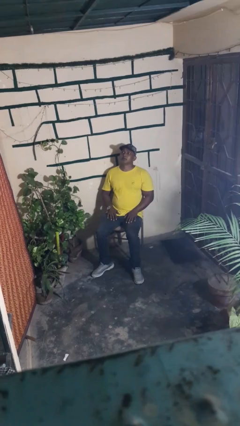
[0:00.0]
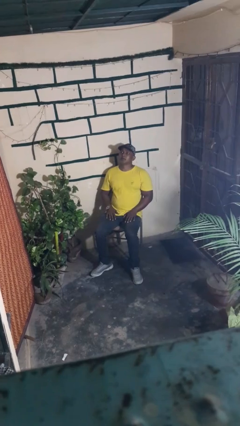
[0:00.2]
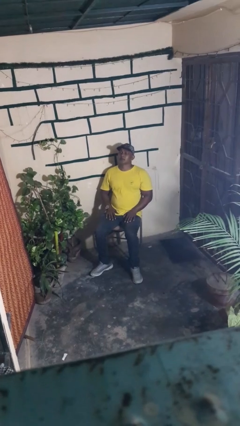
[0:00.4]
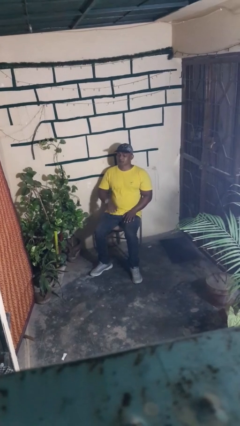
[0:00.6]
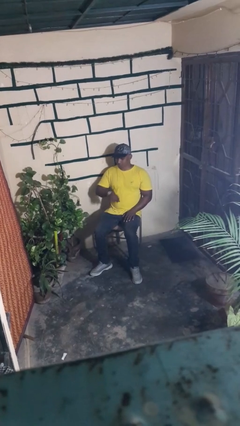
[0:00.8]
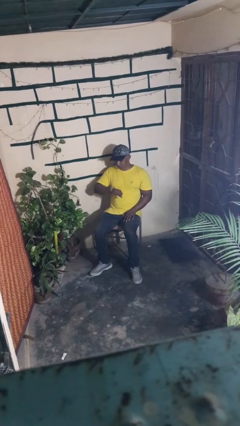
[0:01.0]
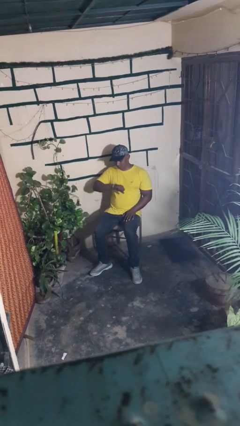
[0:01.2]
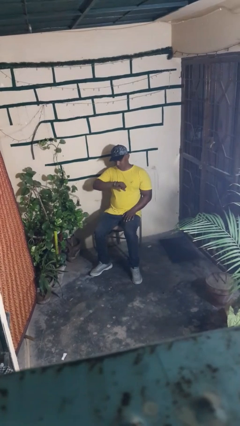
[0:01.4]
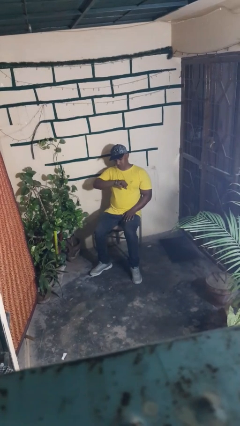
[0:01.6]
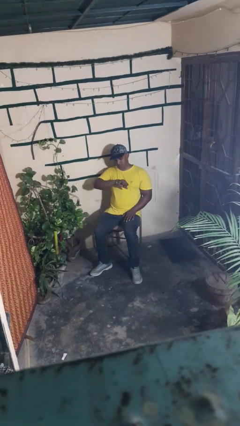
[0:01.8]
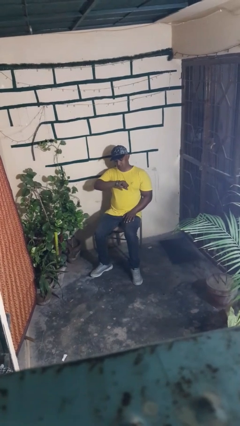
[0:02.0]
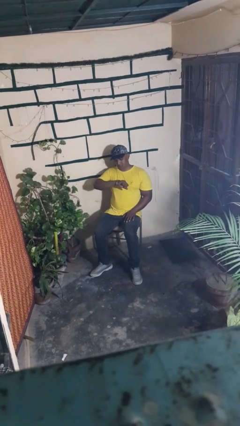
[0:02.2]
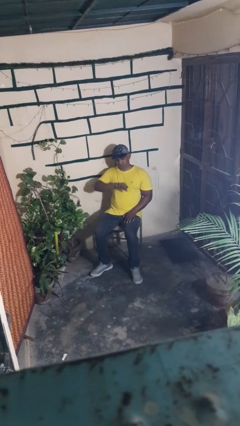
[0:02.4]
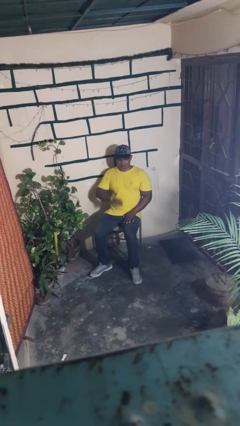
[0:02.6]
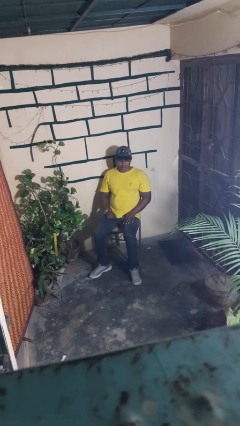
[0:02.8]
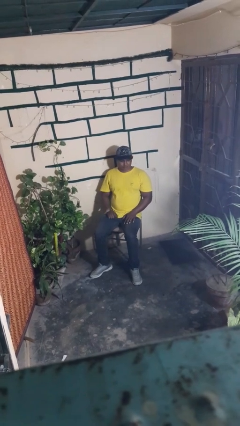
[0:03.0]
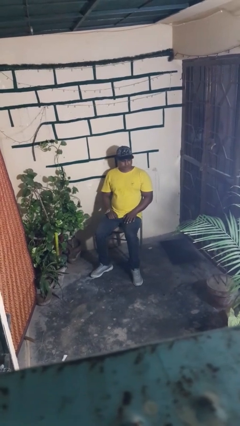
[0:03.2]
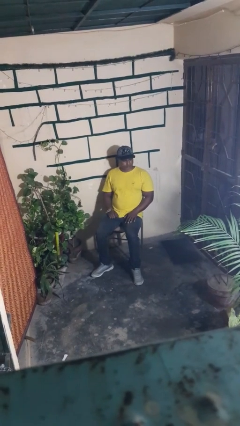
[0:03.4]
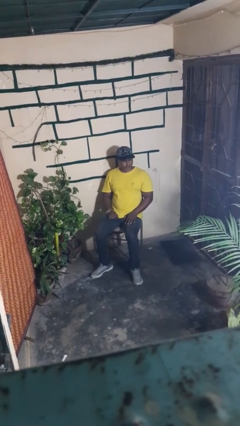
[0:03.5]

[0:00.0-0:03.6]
person looks at wristwatch

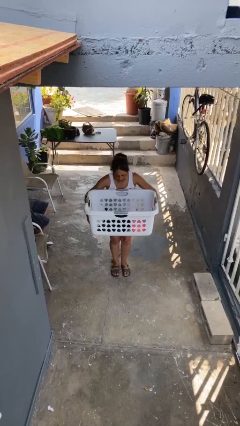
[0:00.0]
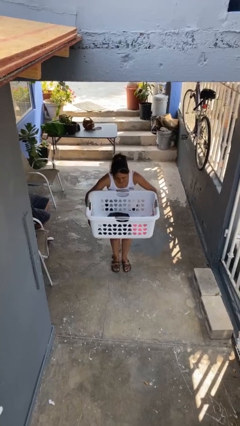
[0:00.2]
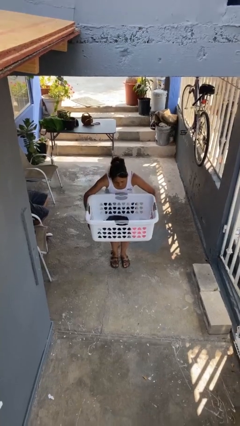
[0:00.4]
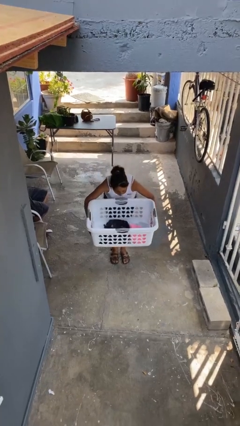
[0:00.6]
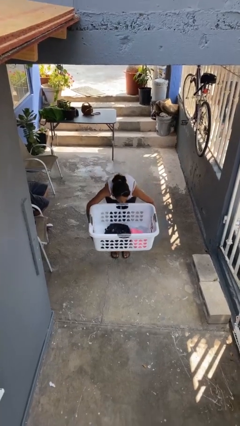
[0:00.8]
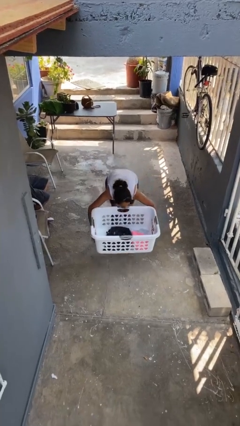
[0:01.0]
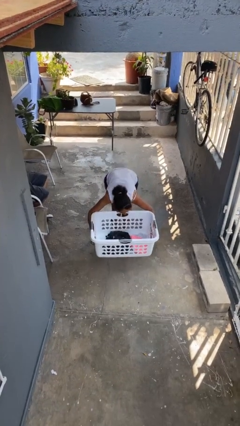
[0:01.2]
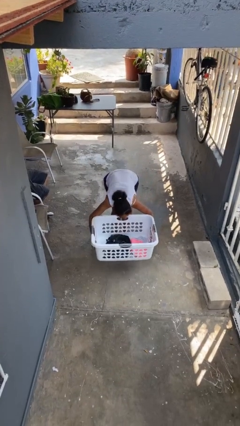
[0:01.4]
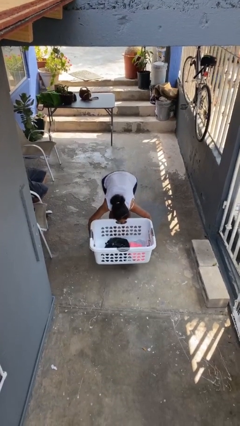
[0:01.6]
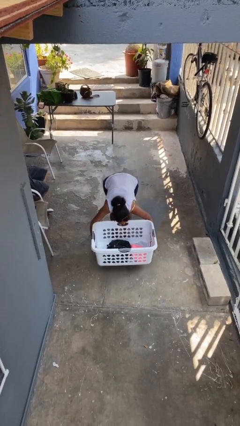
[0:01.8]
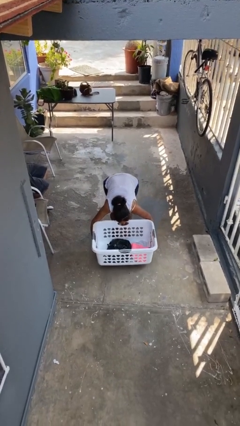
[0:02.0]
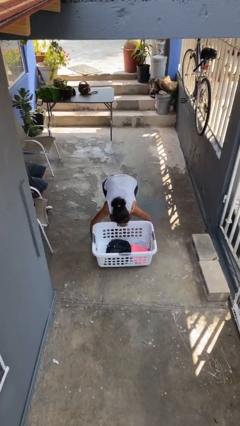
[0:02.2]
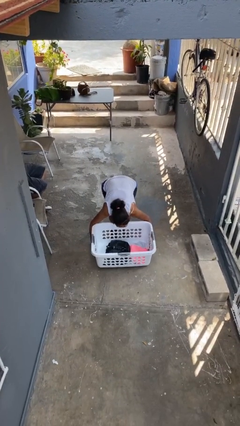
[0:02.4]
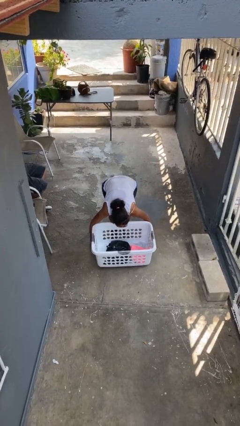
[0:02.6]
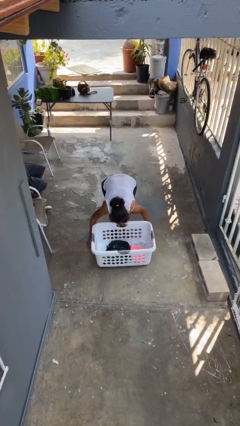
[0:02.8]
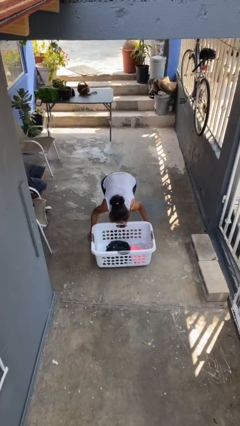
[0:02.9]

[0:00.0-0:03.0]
person puts down object on floor

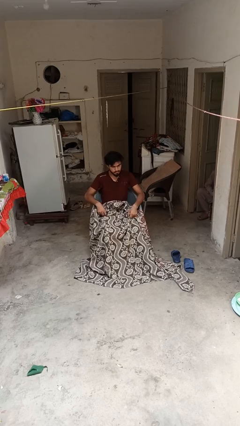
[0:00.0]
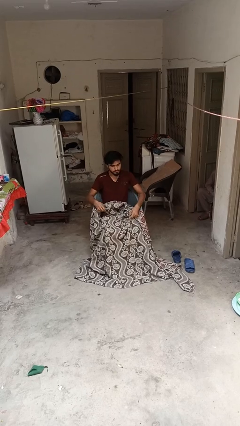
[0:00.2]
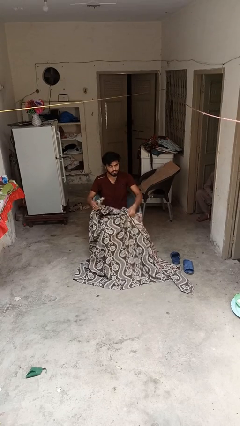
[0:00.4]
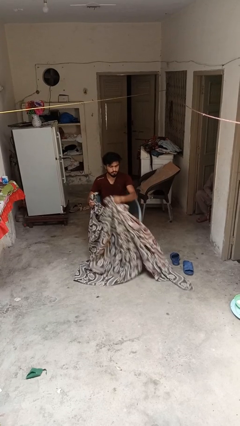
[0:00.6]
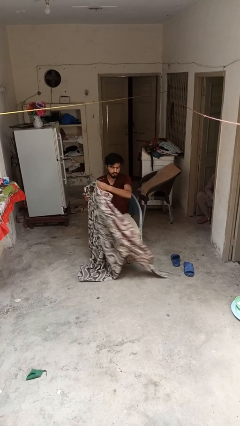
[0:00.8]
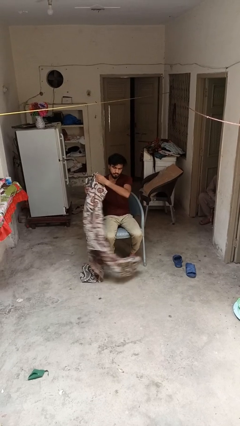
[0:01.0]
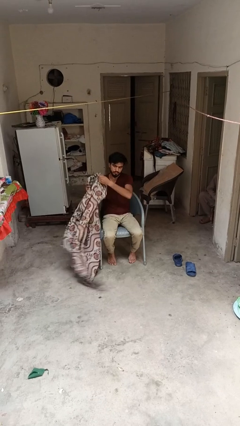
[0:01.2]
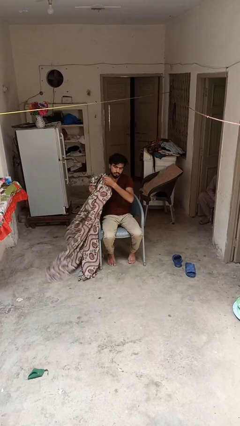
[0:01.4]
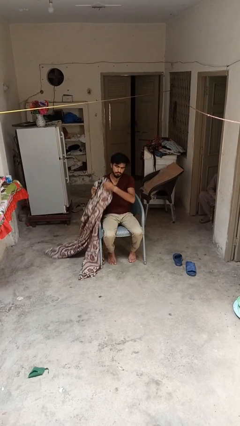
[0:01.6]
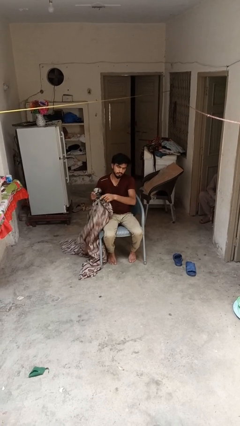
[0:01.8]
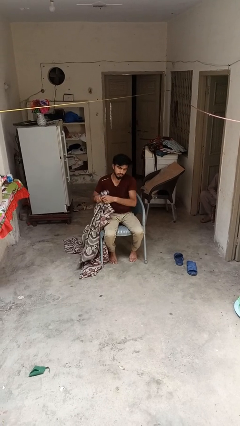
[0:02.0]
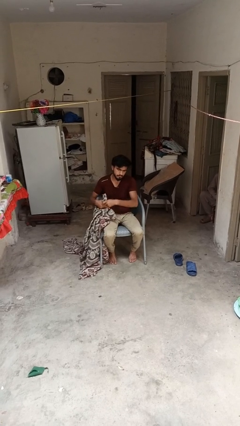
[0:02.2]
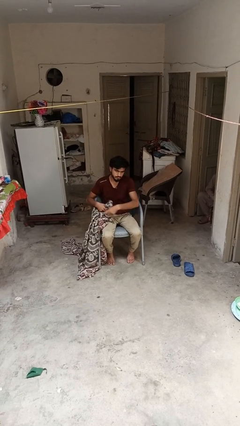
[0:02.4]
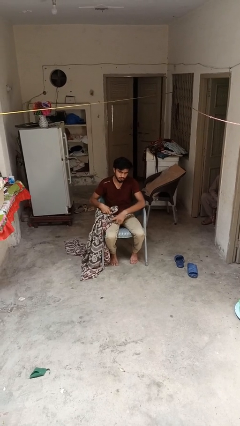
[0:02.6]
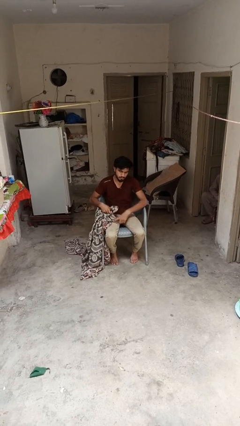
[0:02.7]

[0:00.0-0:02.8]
person uncovers with blanket

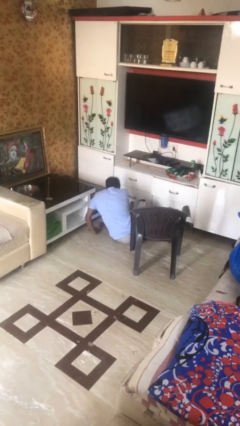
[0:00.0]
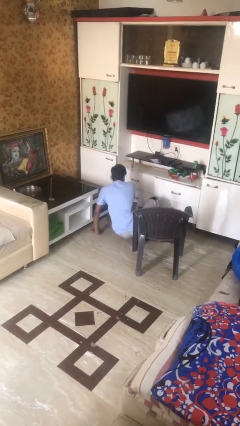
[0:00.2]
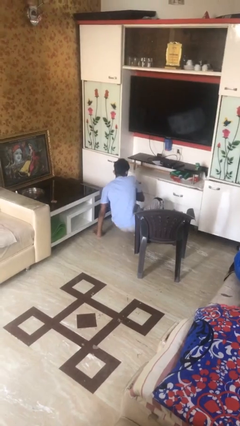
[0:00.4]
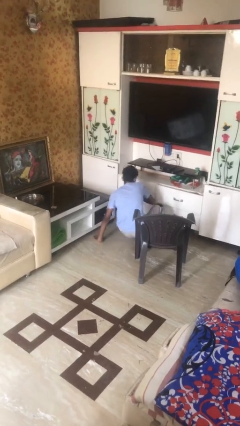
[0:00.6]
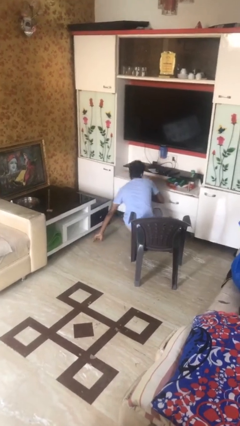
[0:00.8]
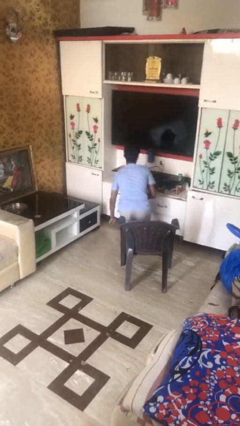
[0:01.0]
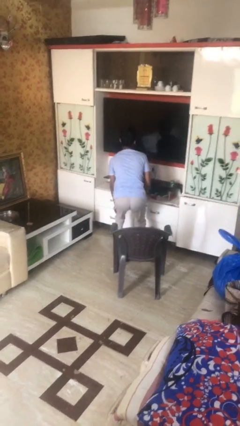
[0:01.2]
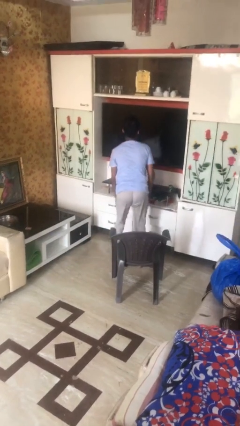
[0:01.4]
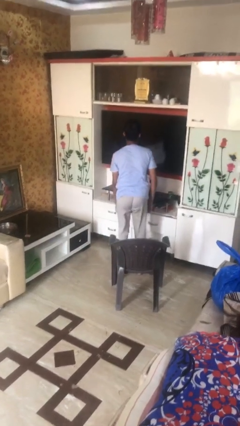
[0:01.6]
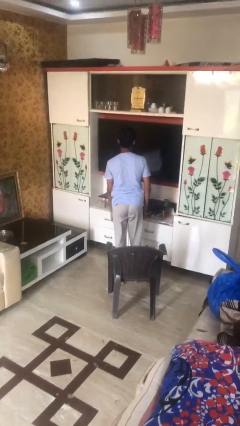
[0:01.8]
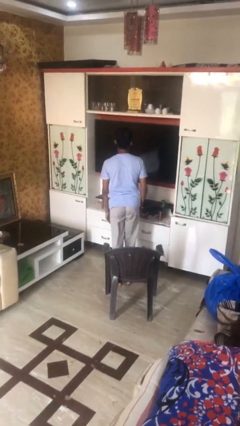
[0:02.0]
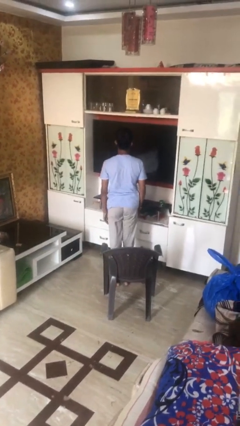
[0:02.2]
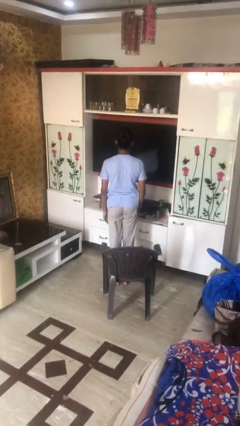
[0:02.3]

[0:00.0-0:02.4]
person stands up from floor

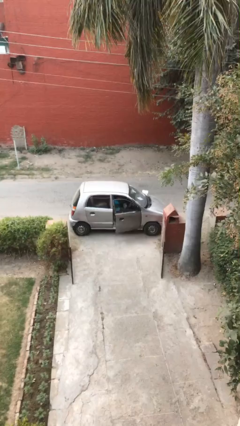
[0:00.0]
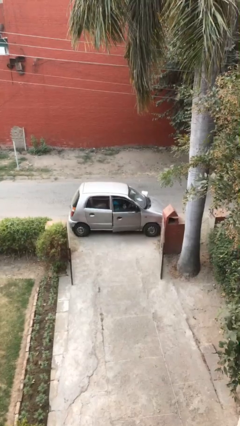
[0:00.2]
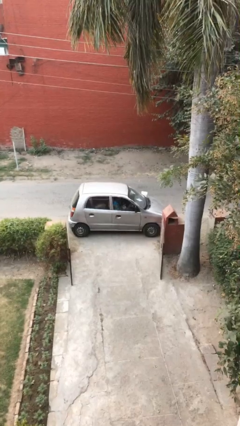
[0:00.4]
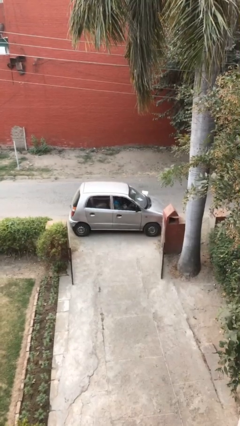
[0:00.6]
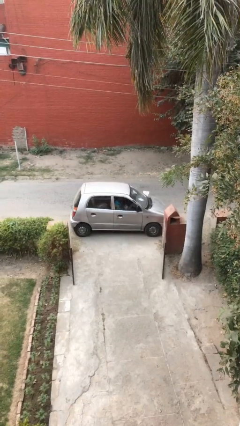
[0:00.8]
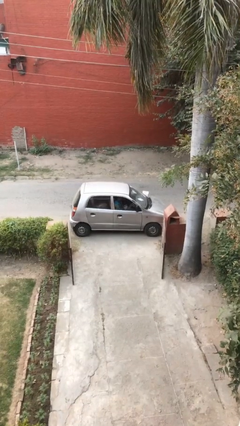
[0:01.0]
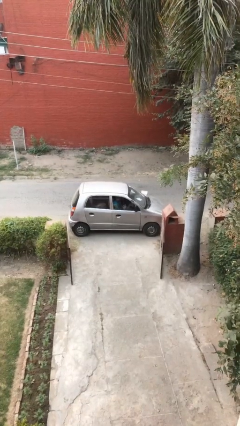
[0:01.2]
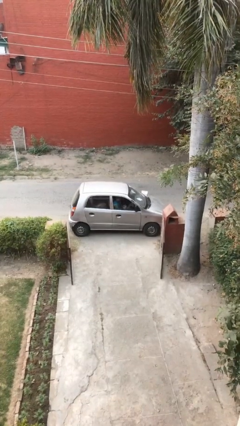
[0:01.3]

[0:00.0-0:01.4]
person closes car door

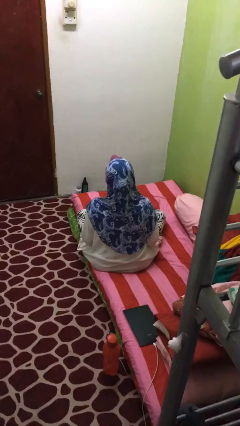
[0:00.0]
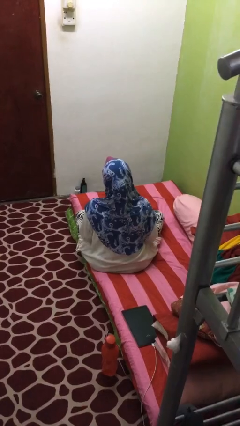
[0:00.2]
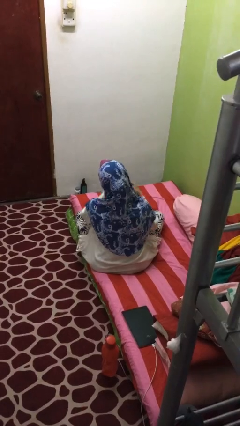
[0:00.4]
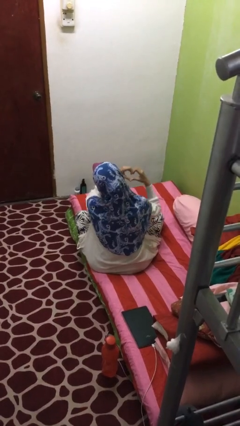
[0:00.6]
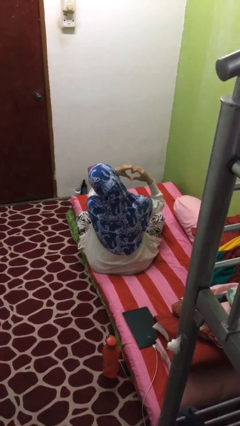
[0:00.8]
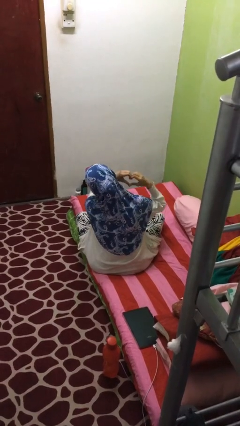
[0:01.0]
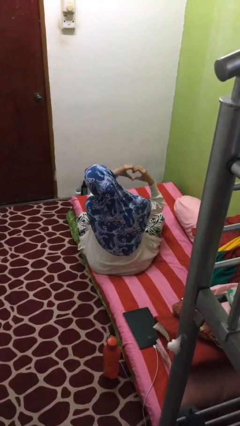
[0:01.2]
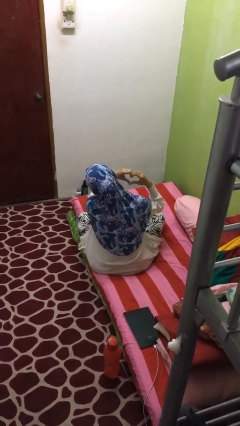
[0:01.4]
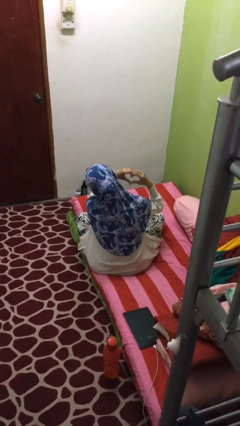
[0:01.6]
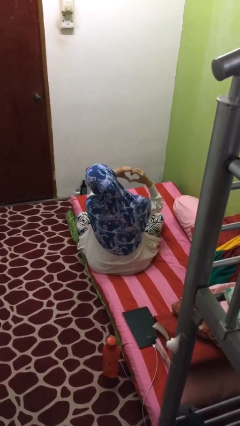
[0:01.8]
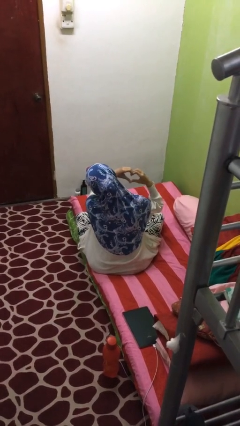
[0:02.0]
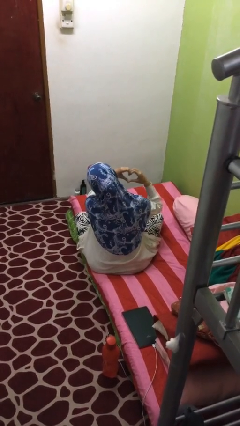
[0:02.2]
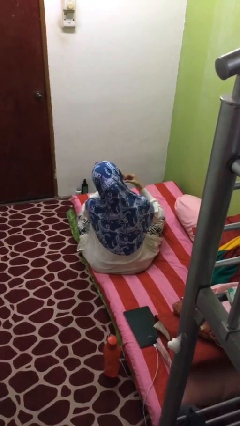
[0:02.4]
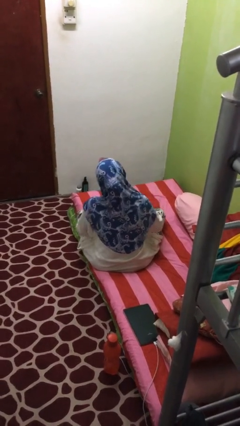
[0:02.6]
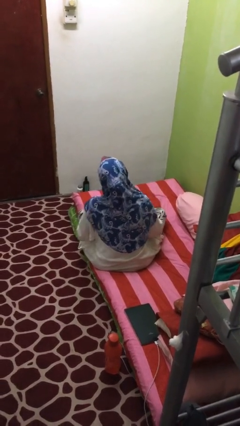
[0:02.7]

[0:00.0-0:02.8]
person gestures heart

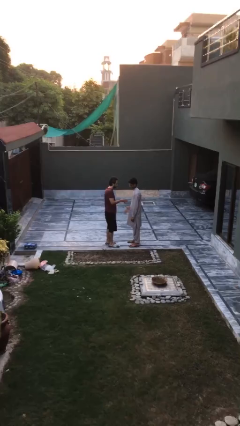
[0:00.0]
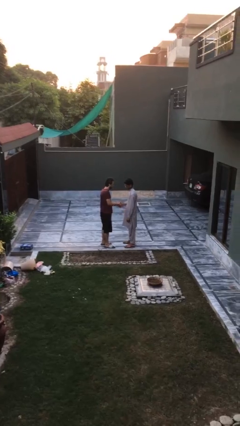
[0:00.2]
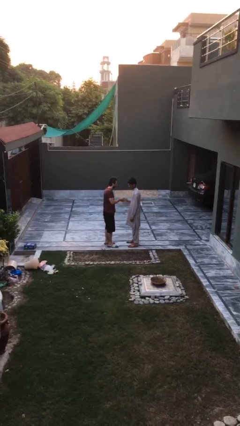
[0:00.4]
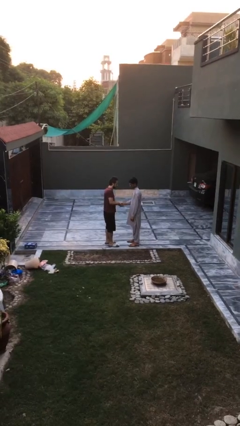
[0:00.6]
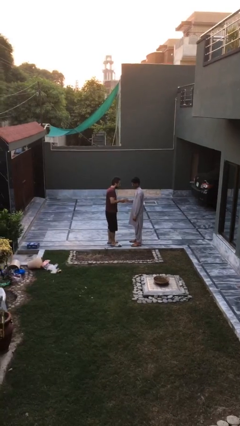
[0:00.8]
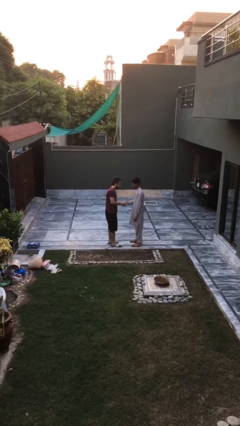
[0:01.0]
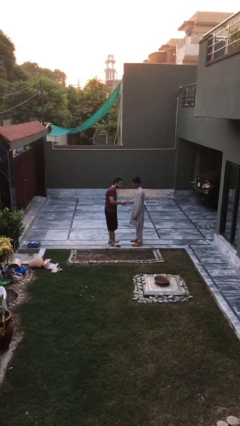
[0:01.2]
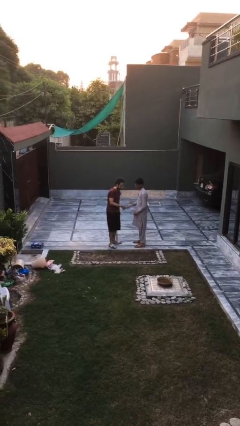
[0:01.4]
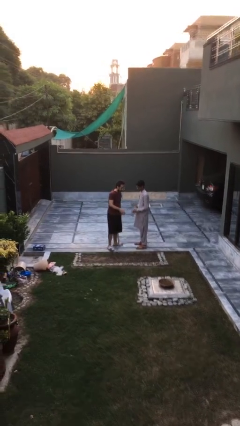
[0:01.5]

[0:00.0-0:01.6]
person shakes hand
